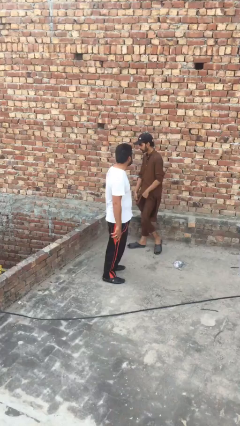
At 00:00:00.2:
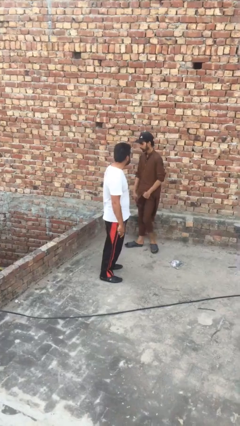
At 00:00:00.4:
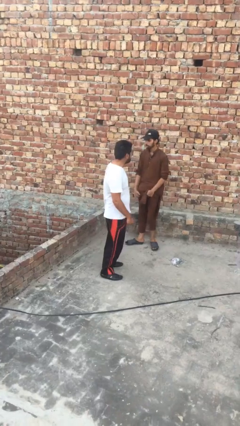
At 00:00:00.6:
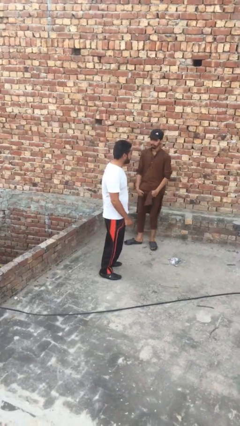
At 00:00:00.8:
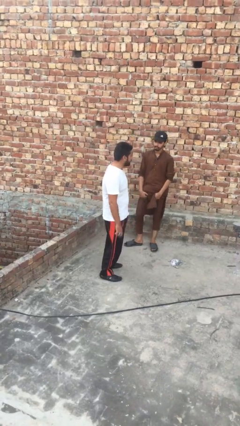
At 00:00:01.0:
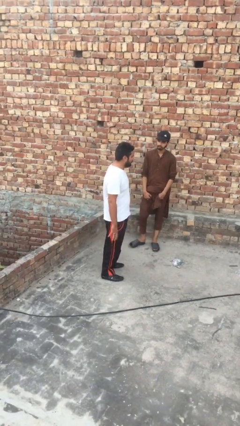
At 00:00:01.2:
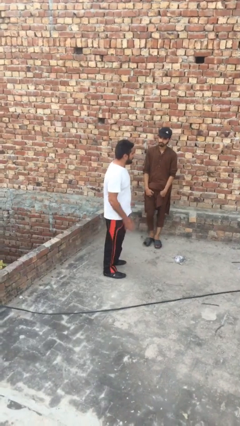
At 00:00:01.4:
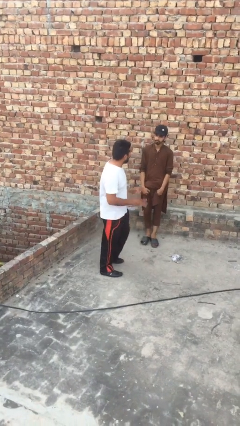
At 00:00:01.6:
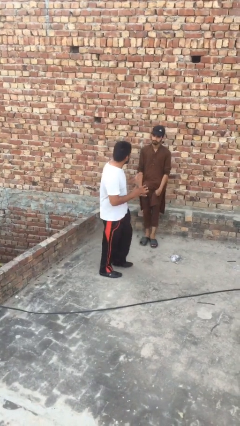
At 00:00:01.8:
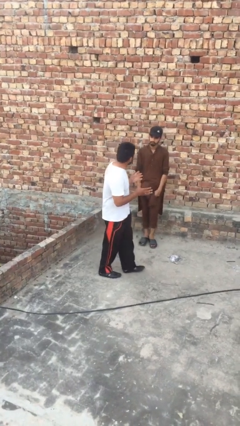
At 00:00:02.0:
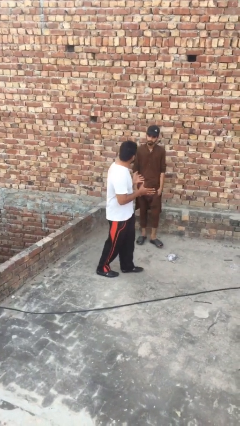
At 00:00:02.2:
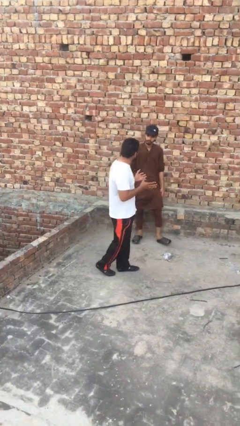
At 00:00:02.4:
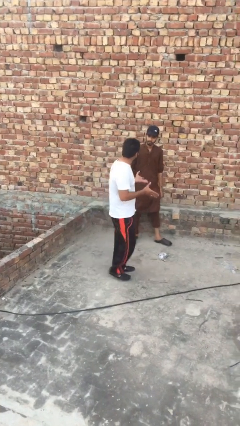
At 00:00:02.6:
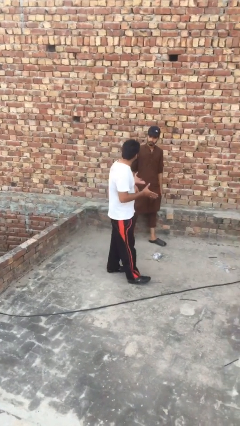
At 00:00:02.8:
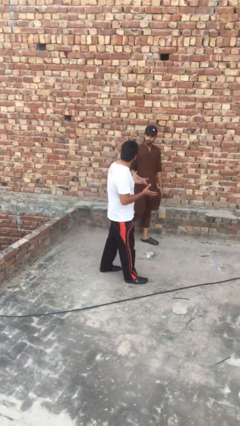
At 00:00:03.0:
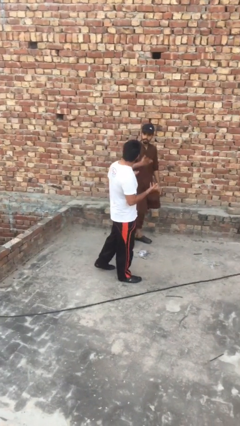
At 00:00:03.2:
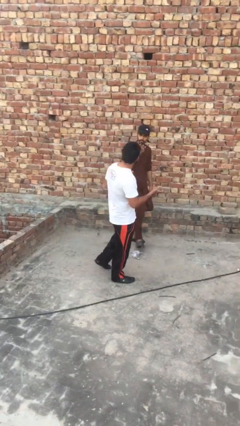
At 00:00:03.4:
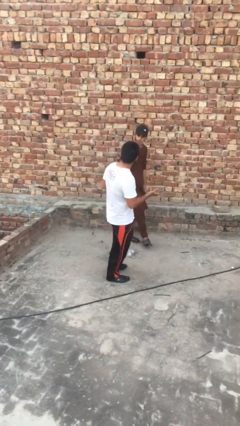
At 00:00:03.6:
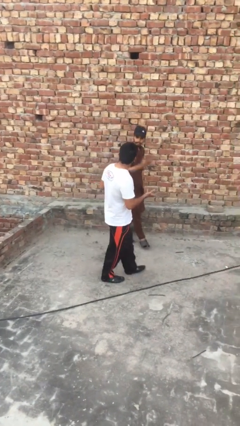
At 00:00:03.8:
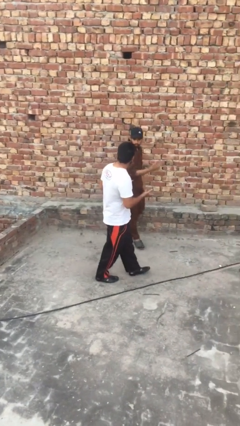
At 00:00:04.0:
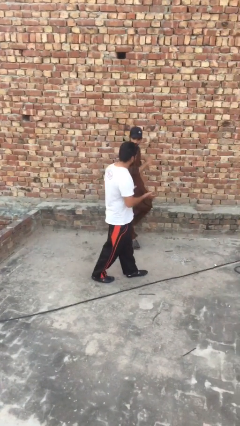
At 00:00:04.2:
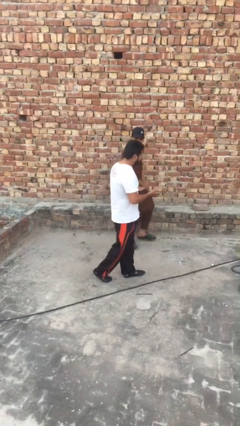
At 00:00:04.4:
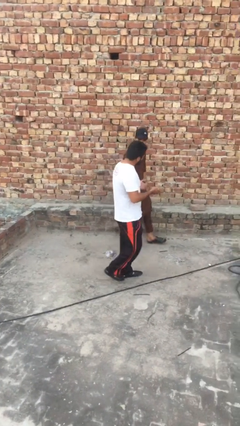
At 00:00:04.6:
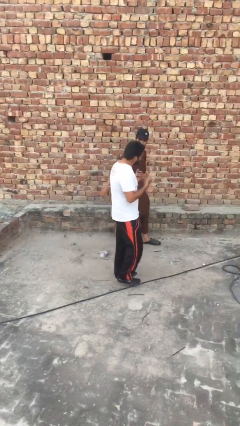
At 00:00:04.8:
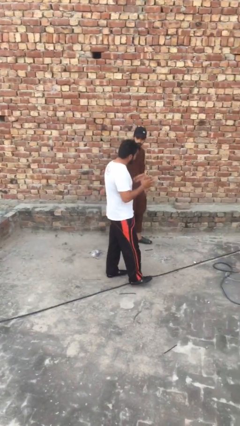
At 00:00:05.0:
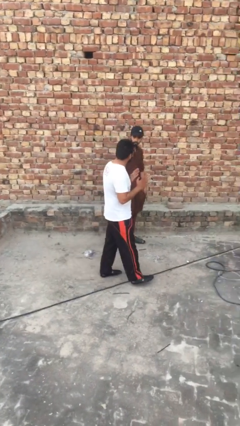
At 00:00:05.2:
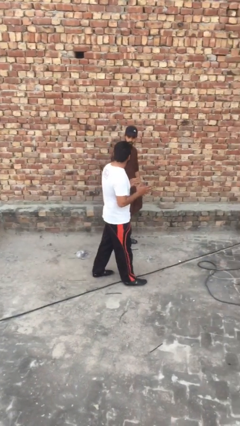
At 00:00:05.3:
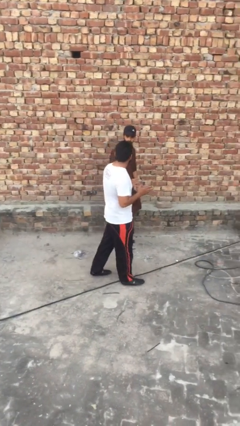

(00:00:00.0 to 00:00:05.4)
person talks to person

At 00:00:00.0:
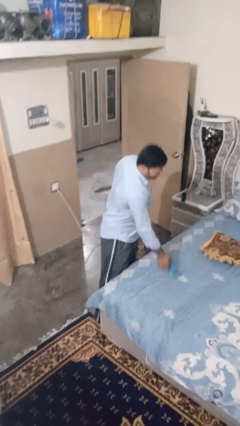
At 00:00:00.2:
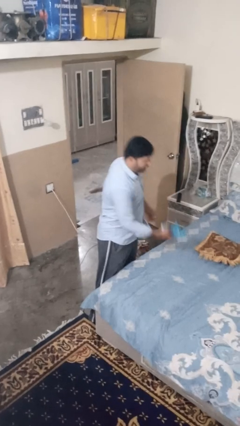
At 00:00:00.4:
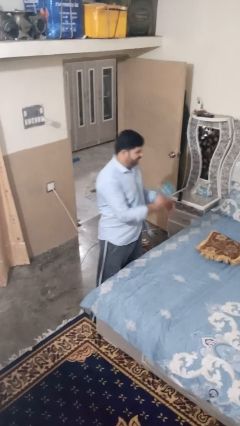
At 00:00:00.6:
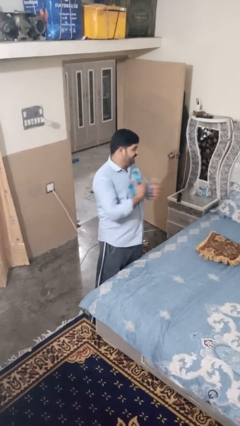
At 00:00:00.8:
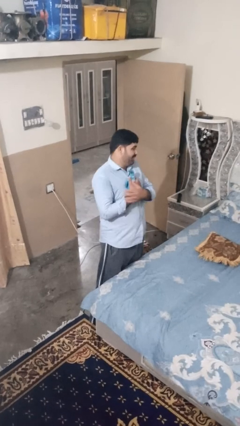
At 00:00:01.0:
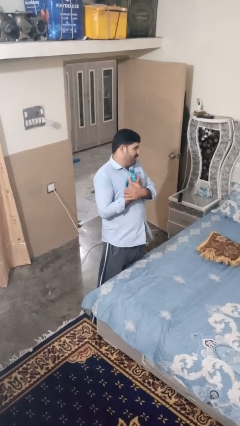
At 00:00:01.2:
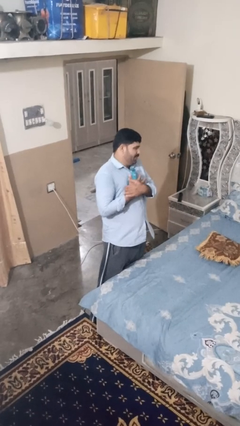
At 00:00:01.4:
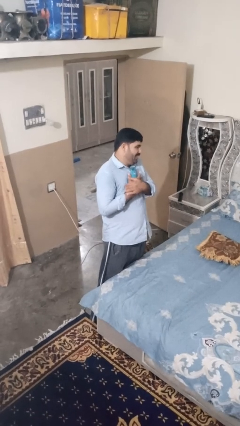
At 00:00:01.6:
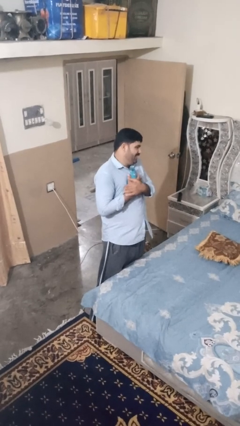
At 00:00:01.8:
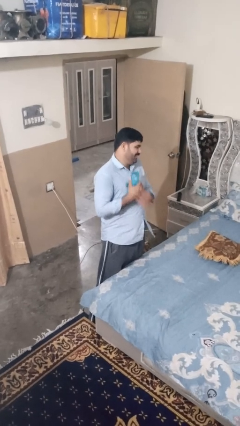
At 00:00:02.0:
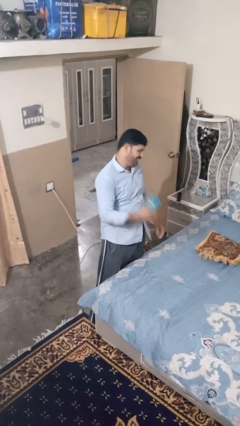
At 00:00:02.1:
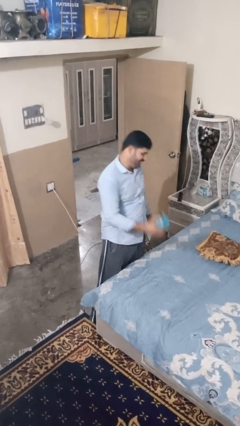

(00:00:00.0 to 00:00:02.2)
person hugs stuffed animal

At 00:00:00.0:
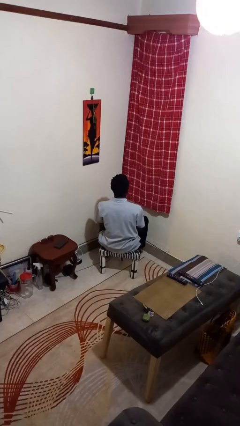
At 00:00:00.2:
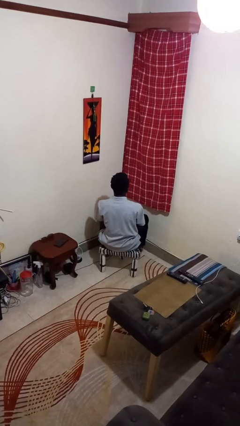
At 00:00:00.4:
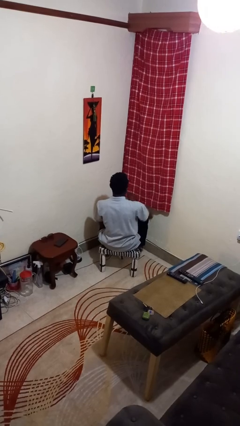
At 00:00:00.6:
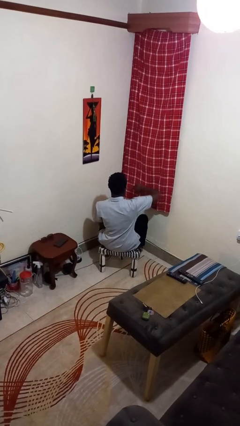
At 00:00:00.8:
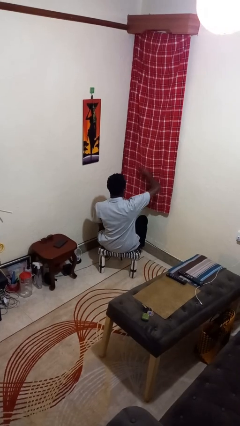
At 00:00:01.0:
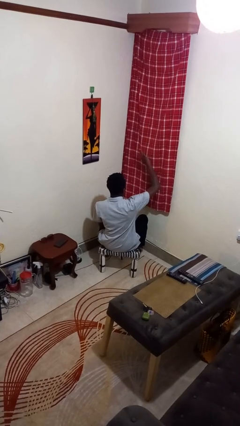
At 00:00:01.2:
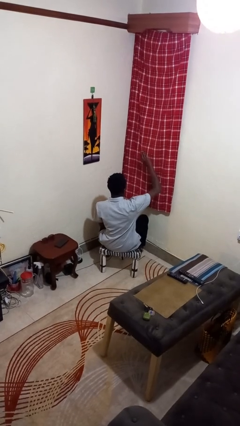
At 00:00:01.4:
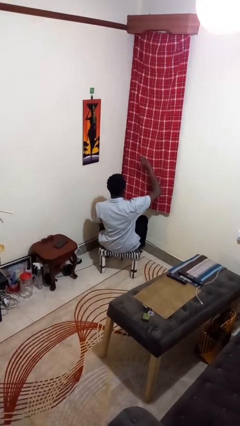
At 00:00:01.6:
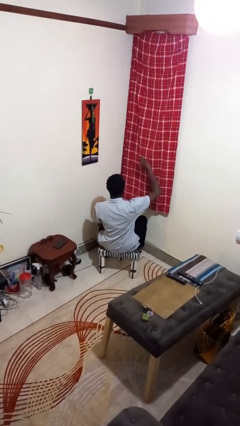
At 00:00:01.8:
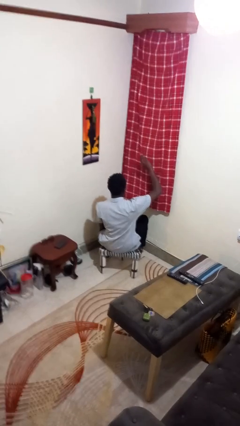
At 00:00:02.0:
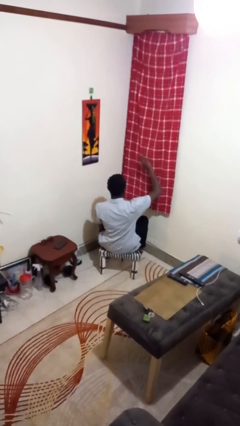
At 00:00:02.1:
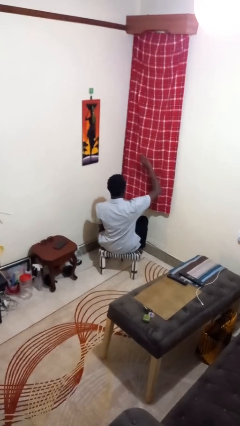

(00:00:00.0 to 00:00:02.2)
person gestures swipe up

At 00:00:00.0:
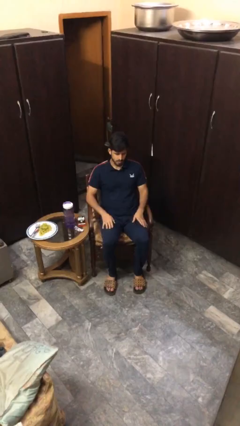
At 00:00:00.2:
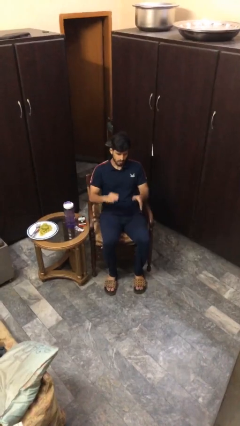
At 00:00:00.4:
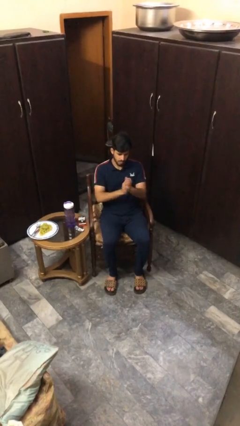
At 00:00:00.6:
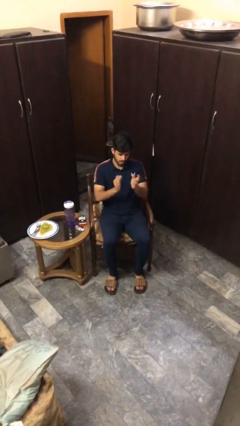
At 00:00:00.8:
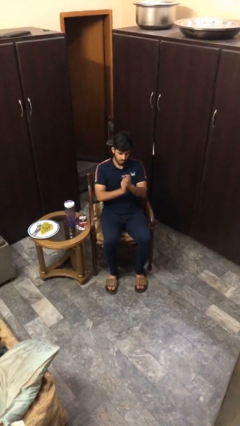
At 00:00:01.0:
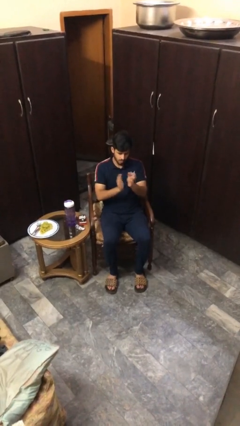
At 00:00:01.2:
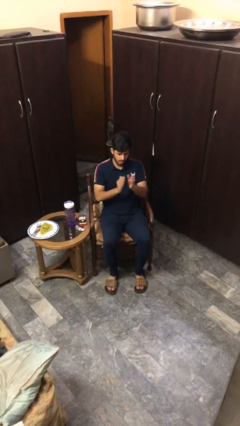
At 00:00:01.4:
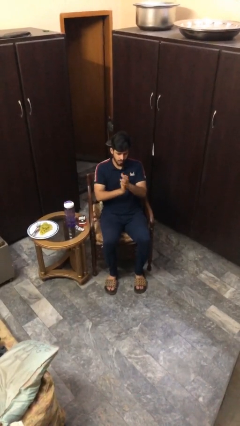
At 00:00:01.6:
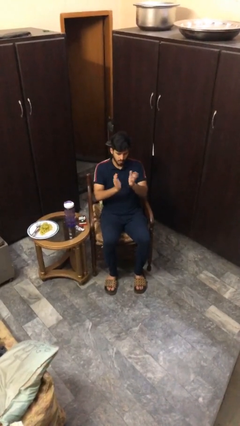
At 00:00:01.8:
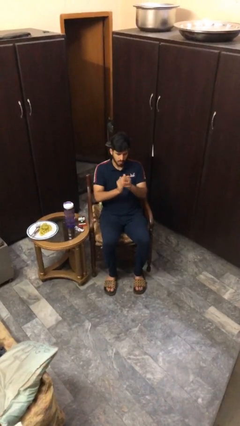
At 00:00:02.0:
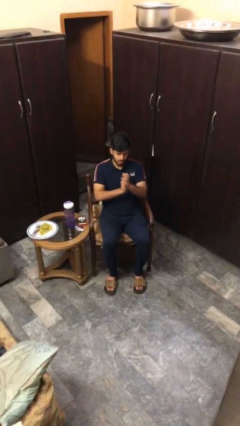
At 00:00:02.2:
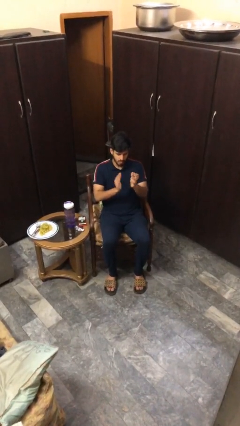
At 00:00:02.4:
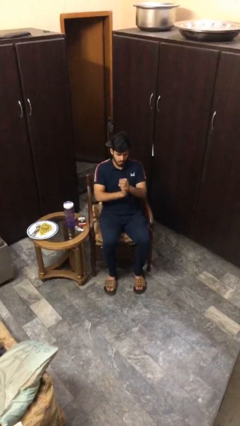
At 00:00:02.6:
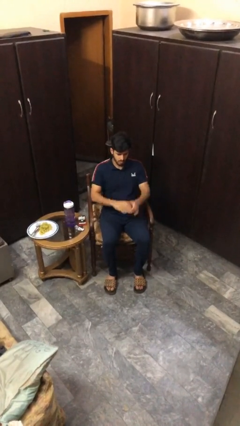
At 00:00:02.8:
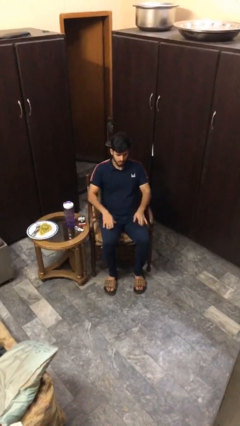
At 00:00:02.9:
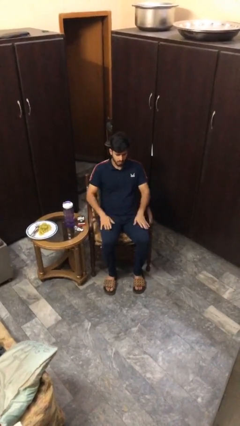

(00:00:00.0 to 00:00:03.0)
person claps hands

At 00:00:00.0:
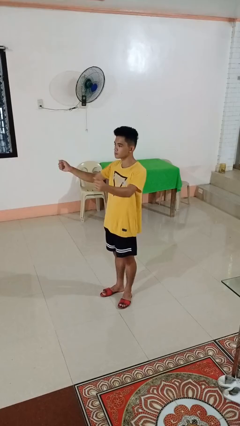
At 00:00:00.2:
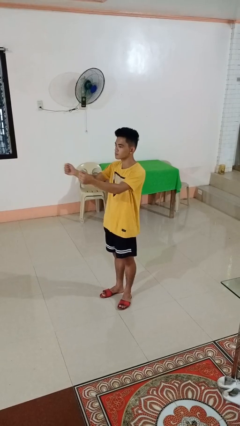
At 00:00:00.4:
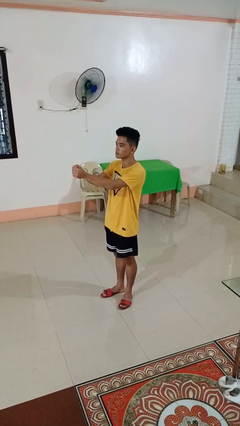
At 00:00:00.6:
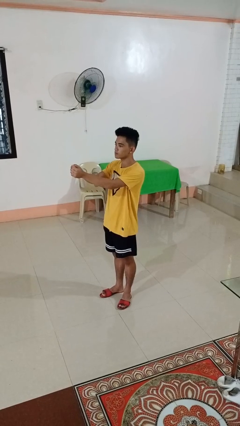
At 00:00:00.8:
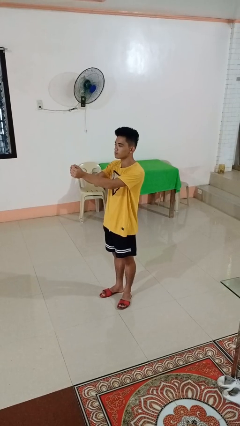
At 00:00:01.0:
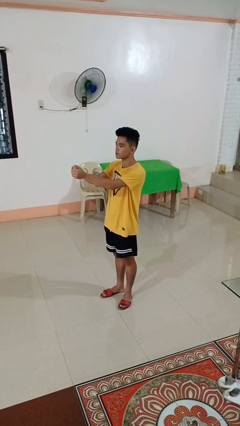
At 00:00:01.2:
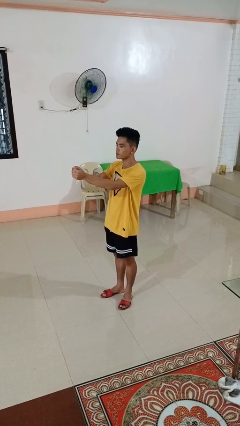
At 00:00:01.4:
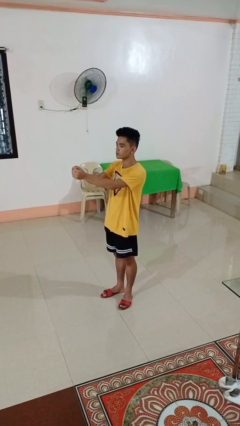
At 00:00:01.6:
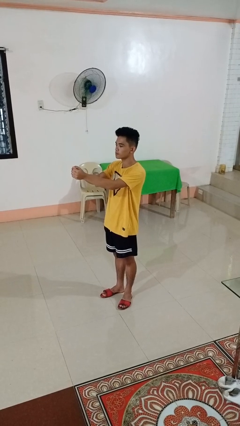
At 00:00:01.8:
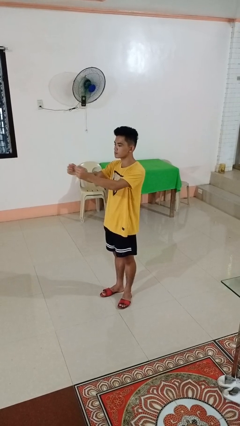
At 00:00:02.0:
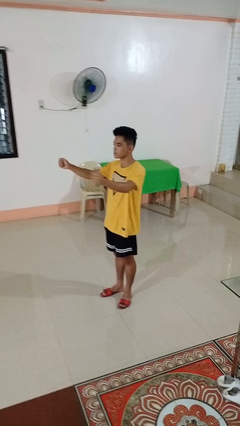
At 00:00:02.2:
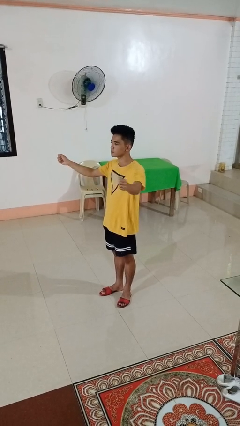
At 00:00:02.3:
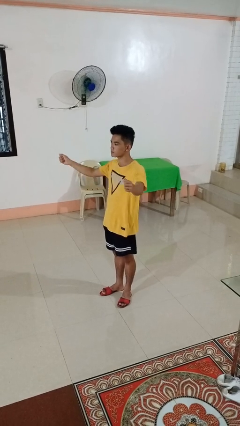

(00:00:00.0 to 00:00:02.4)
person gestures zoom in

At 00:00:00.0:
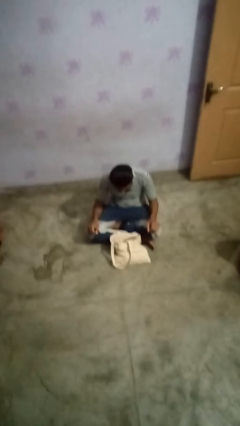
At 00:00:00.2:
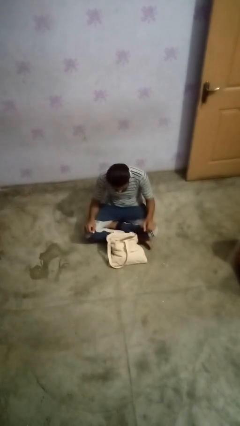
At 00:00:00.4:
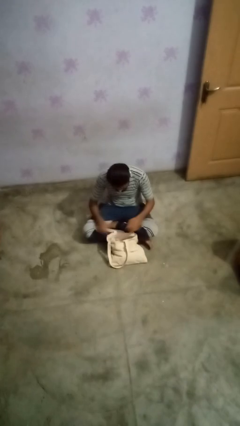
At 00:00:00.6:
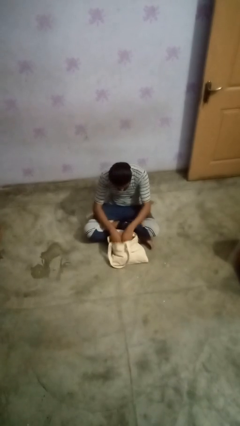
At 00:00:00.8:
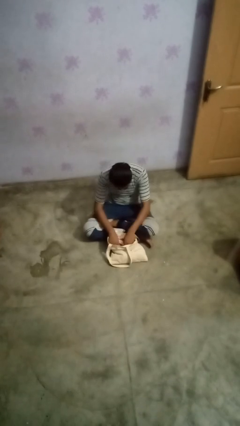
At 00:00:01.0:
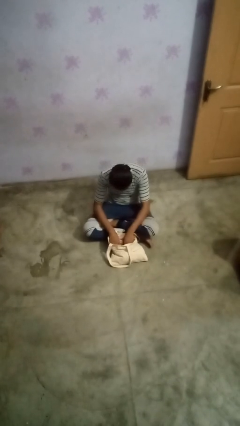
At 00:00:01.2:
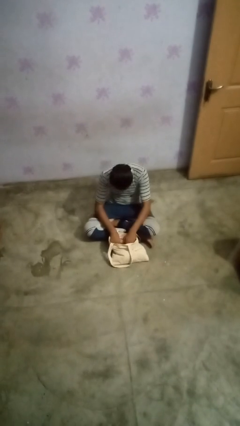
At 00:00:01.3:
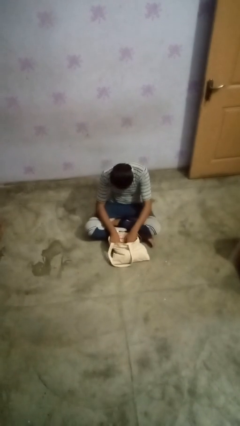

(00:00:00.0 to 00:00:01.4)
person searches in bag

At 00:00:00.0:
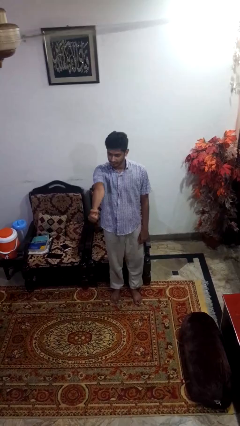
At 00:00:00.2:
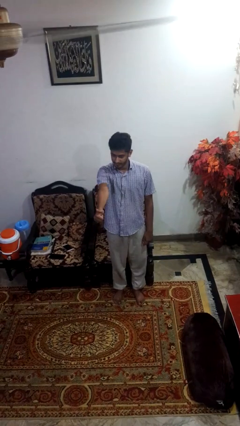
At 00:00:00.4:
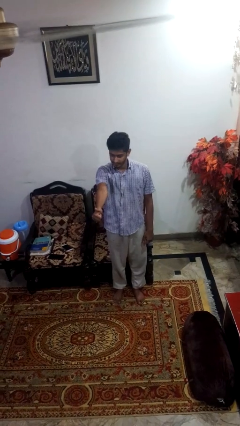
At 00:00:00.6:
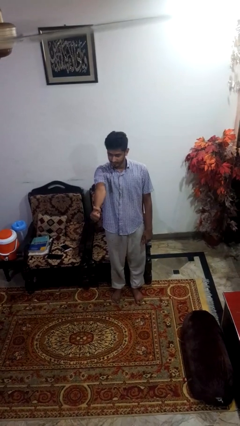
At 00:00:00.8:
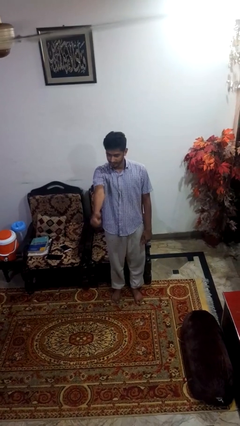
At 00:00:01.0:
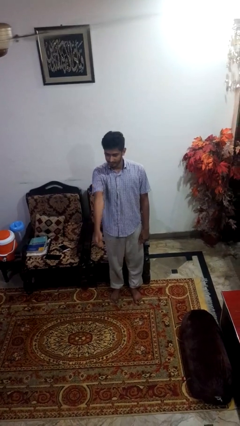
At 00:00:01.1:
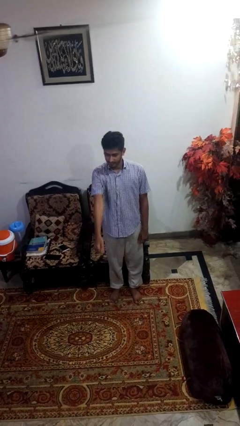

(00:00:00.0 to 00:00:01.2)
person gestures thumbs up
